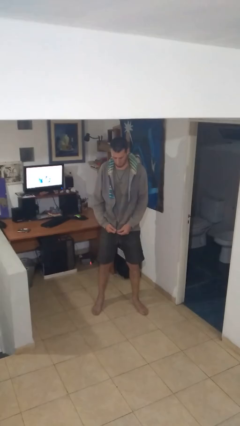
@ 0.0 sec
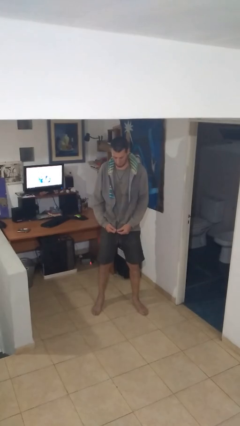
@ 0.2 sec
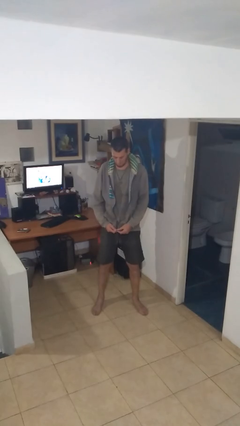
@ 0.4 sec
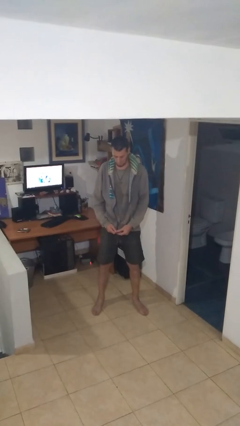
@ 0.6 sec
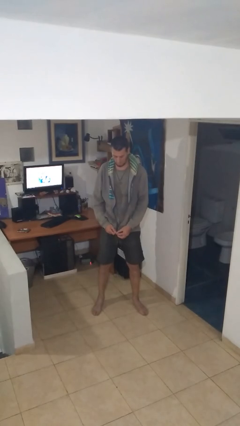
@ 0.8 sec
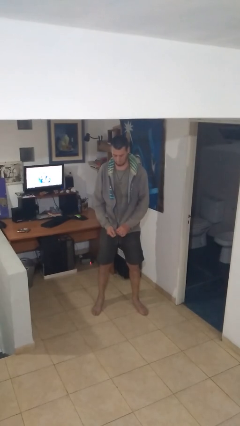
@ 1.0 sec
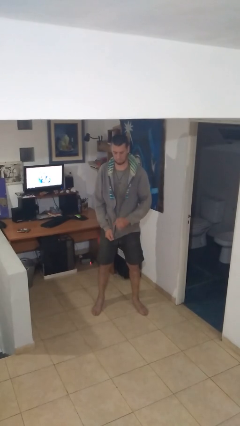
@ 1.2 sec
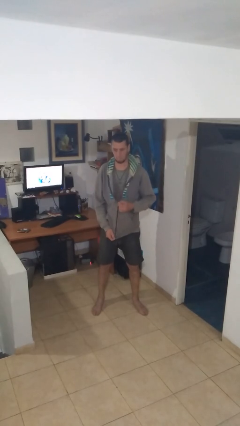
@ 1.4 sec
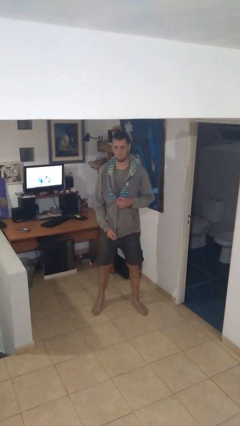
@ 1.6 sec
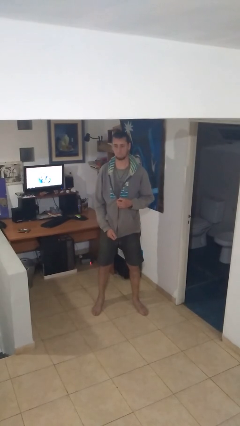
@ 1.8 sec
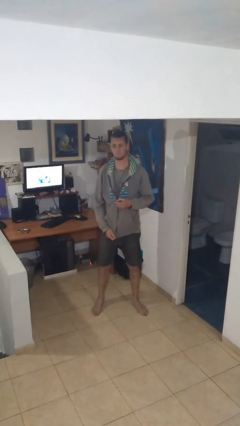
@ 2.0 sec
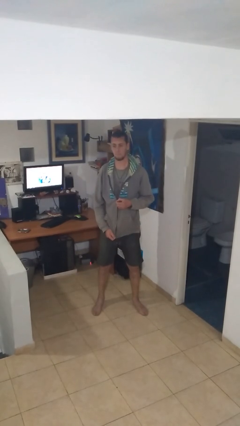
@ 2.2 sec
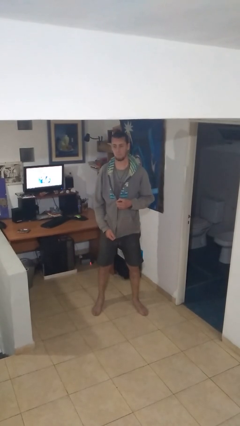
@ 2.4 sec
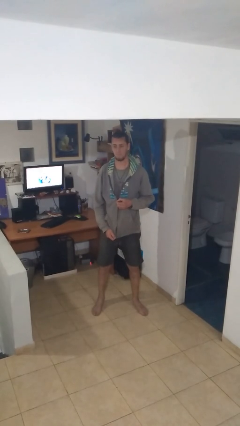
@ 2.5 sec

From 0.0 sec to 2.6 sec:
person zips up jacket

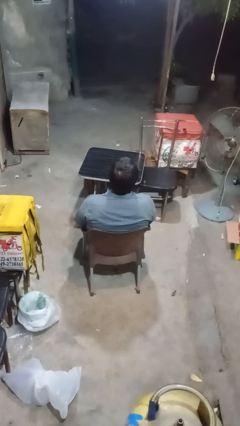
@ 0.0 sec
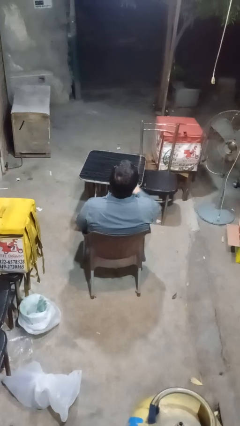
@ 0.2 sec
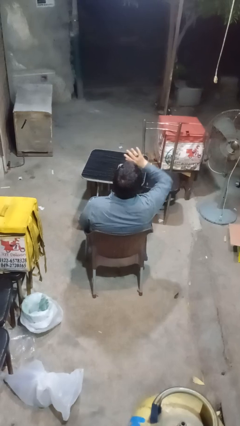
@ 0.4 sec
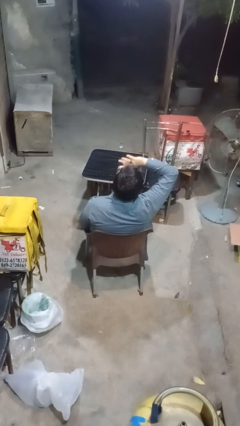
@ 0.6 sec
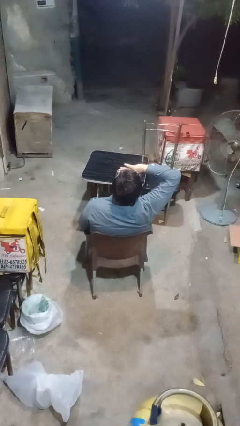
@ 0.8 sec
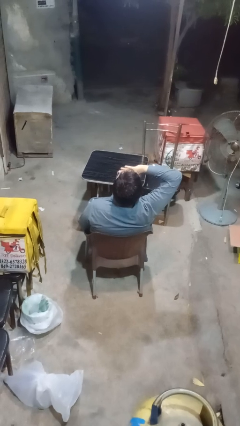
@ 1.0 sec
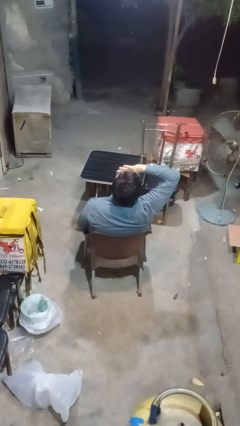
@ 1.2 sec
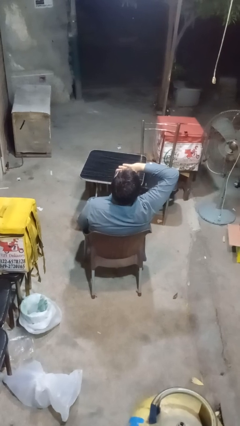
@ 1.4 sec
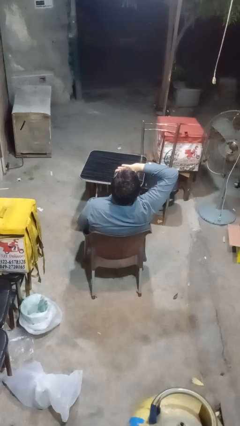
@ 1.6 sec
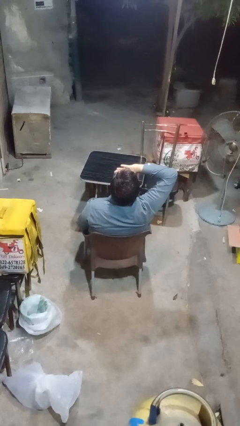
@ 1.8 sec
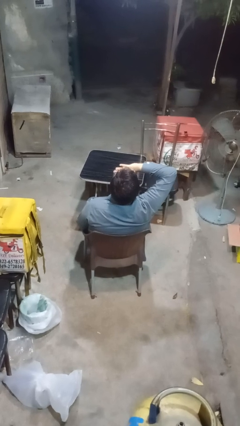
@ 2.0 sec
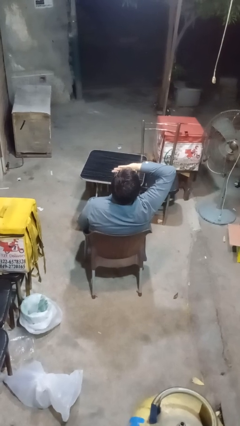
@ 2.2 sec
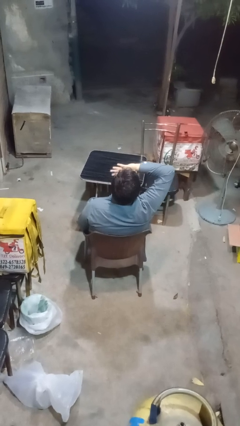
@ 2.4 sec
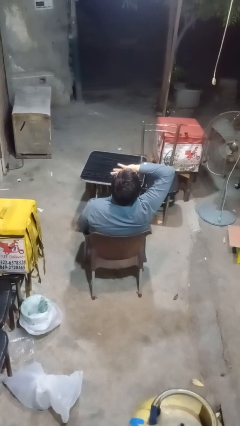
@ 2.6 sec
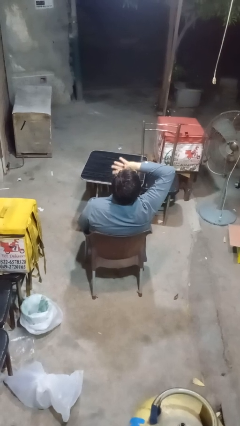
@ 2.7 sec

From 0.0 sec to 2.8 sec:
person yawns

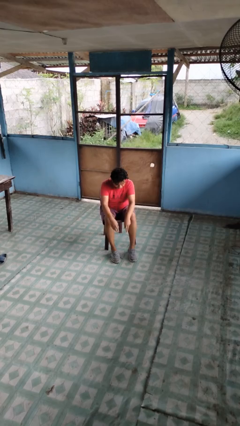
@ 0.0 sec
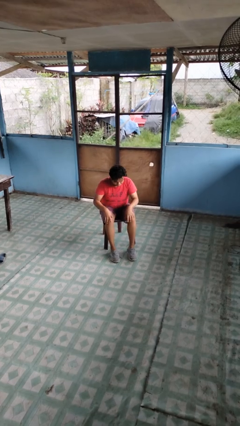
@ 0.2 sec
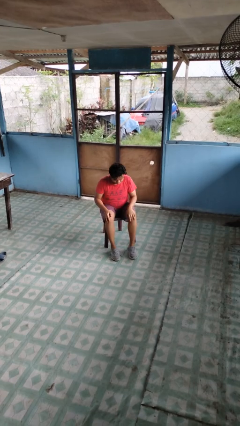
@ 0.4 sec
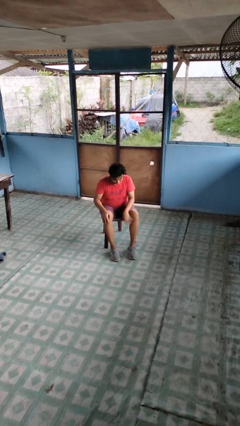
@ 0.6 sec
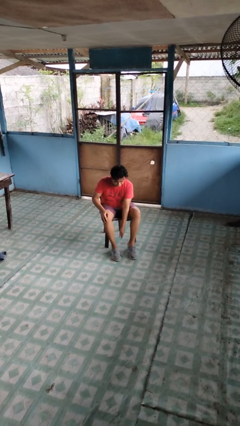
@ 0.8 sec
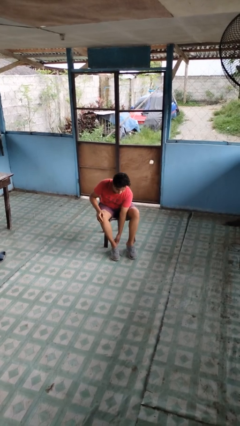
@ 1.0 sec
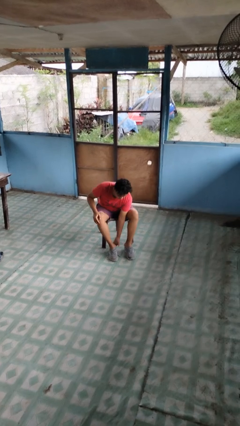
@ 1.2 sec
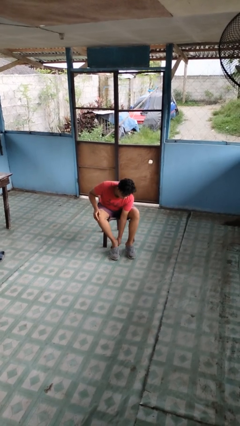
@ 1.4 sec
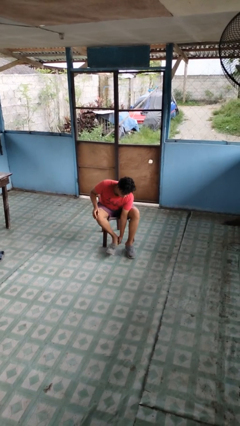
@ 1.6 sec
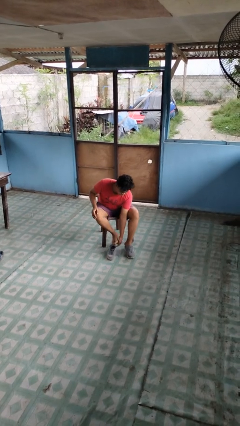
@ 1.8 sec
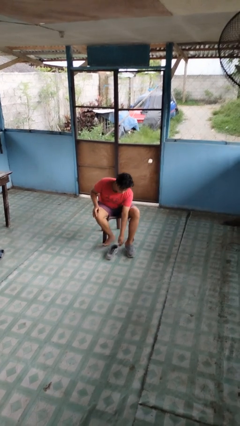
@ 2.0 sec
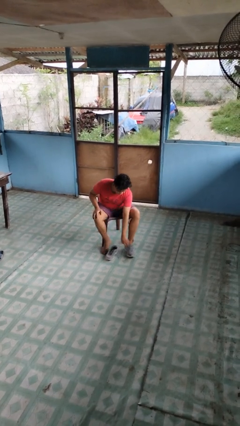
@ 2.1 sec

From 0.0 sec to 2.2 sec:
person takes off shoes

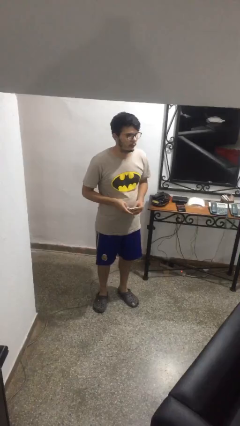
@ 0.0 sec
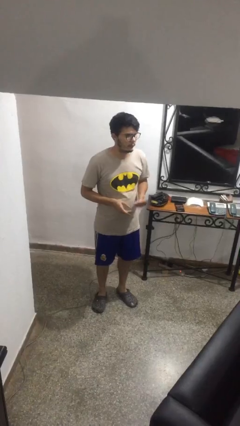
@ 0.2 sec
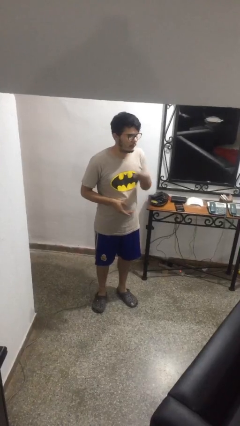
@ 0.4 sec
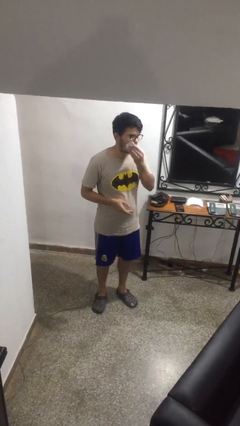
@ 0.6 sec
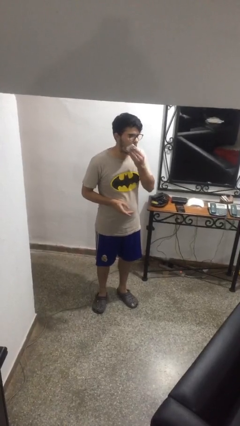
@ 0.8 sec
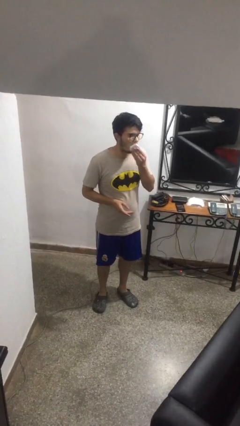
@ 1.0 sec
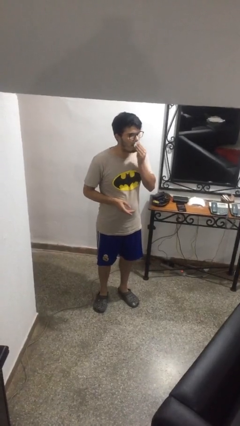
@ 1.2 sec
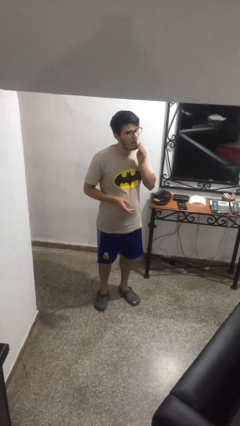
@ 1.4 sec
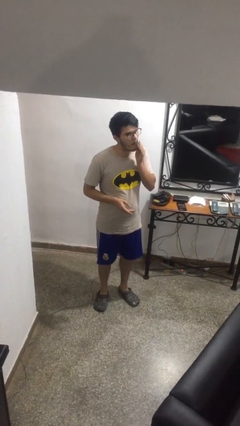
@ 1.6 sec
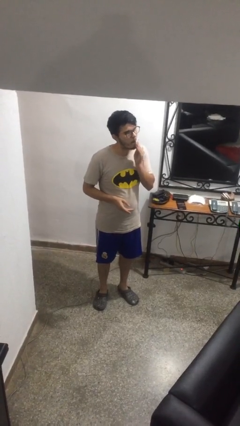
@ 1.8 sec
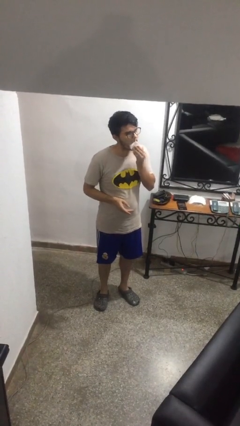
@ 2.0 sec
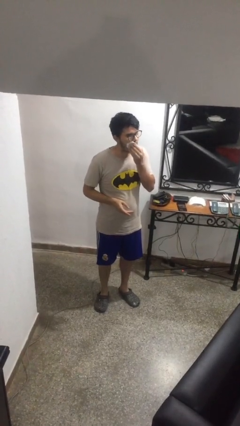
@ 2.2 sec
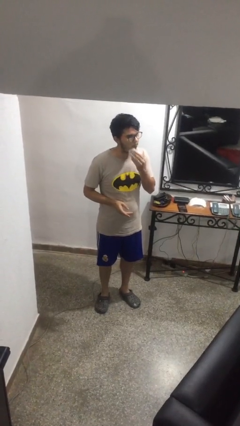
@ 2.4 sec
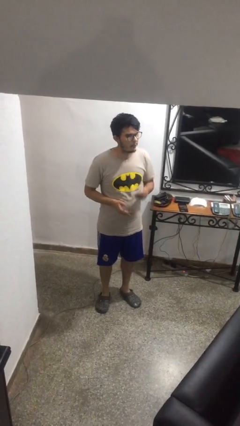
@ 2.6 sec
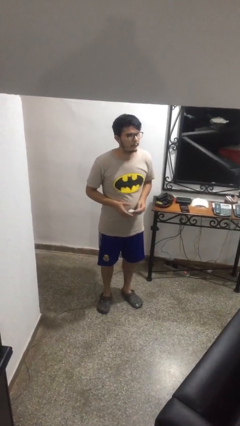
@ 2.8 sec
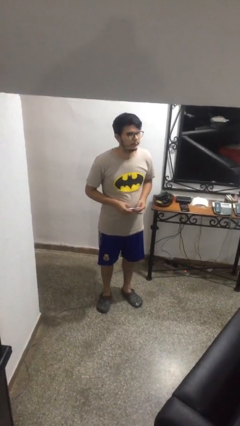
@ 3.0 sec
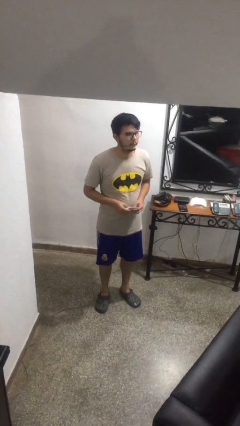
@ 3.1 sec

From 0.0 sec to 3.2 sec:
person wipes mouth with napkin

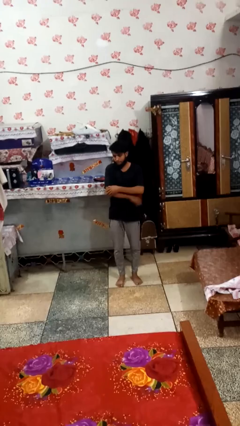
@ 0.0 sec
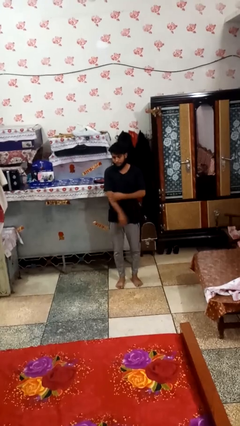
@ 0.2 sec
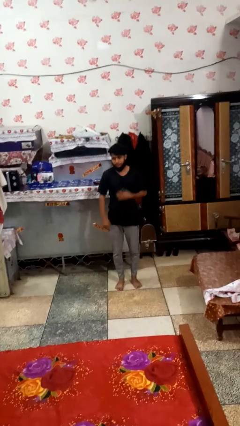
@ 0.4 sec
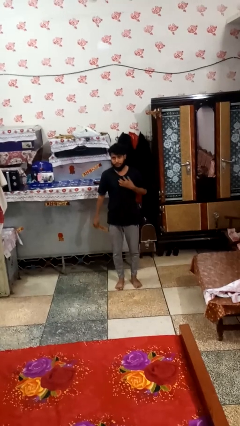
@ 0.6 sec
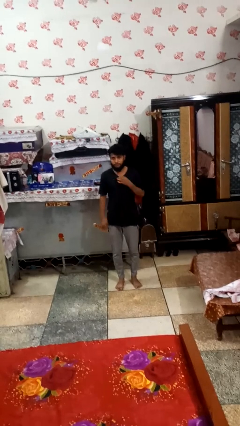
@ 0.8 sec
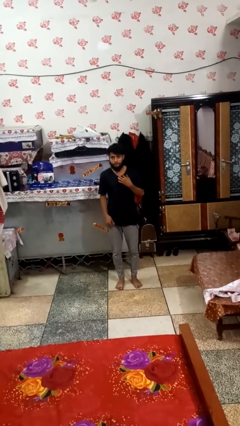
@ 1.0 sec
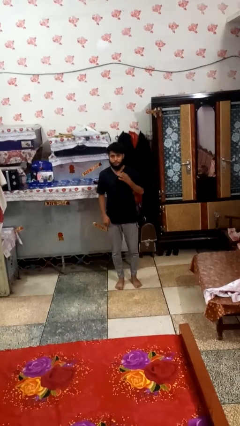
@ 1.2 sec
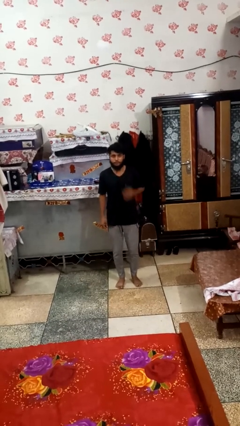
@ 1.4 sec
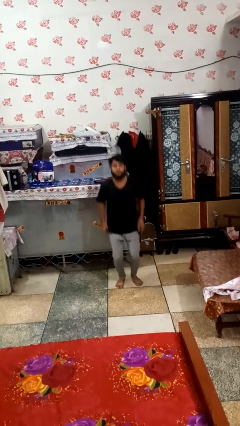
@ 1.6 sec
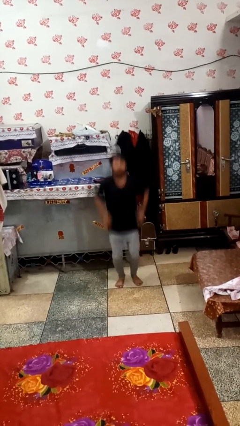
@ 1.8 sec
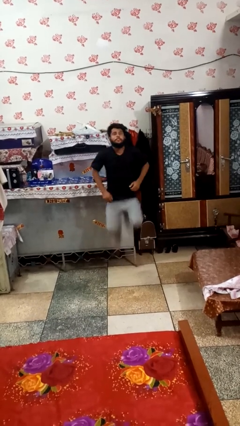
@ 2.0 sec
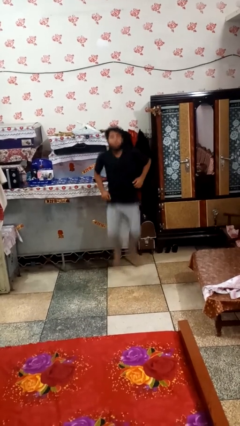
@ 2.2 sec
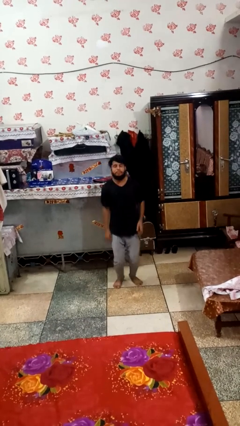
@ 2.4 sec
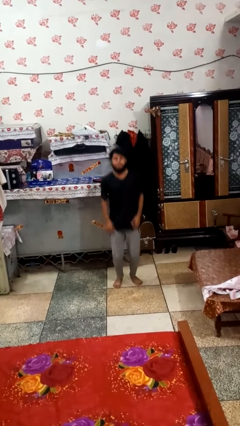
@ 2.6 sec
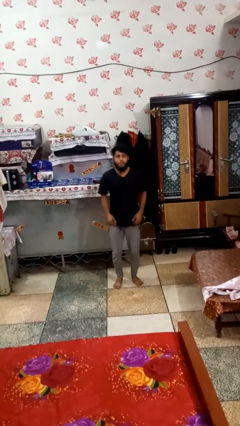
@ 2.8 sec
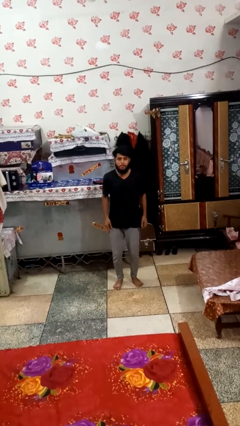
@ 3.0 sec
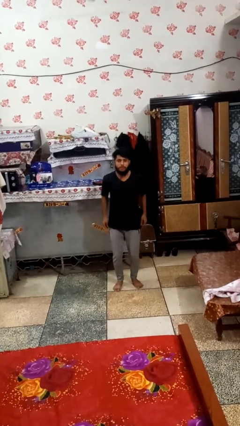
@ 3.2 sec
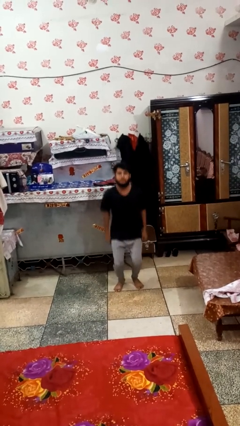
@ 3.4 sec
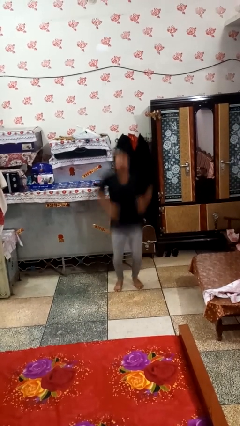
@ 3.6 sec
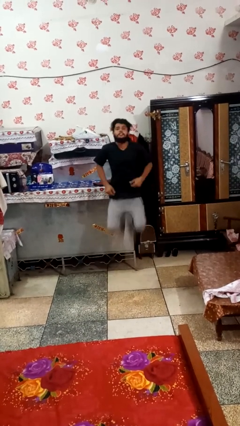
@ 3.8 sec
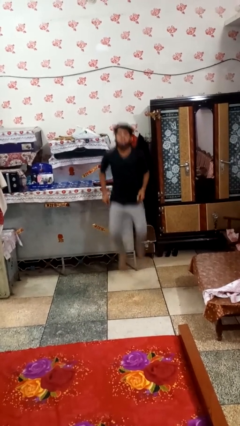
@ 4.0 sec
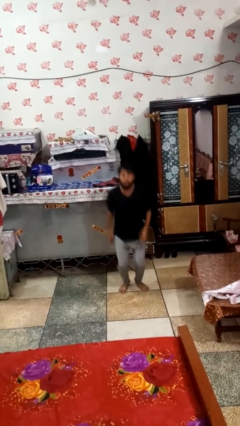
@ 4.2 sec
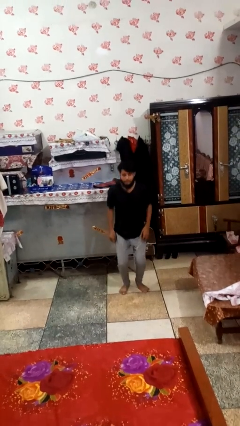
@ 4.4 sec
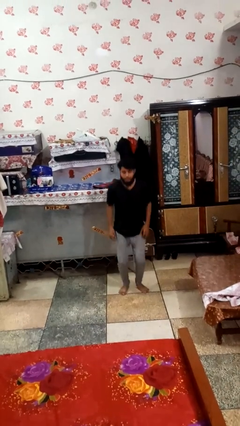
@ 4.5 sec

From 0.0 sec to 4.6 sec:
person jumps

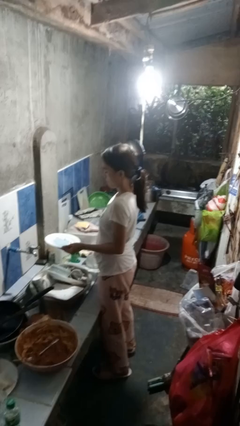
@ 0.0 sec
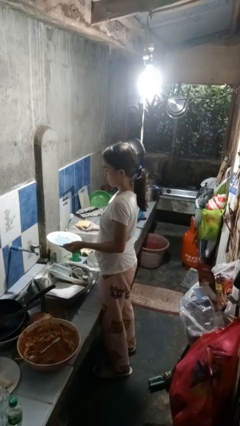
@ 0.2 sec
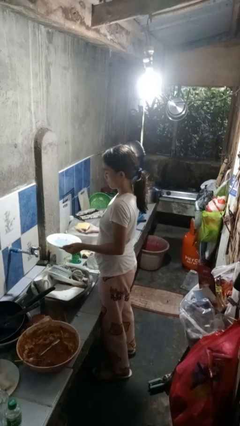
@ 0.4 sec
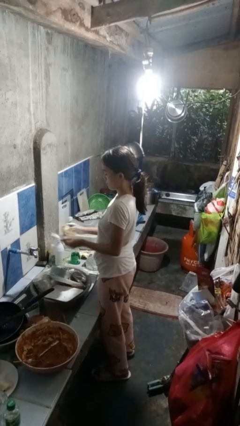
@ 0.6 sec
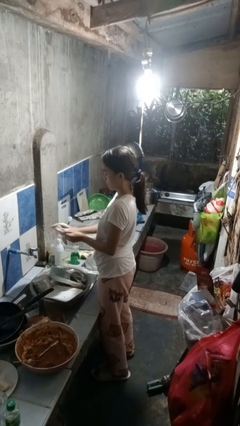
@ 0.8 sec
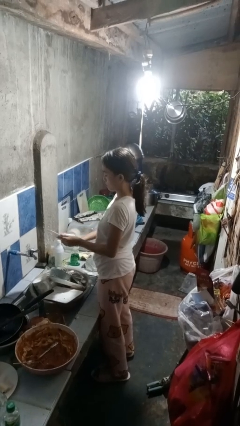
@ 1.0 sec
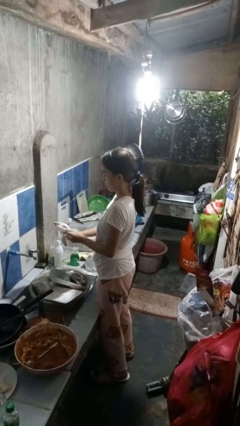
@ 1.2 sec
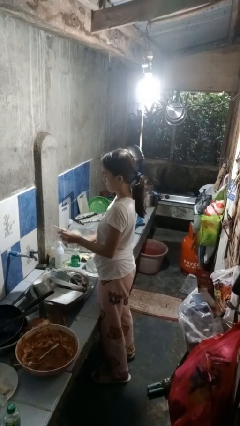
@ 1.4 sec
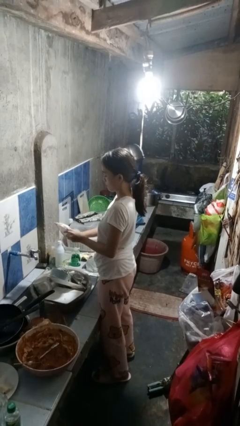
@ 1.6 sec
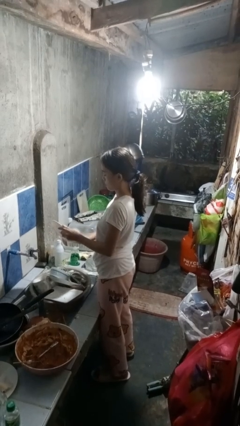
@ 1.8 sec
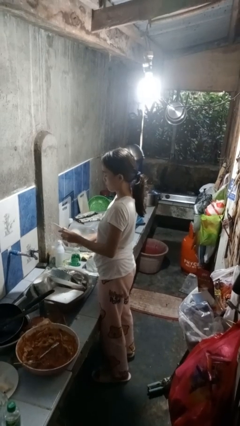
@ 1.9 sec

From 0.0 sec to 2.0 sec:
person washes dish
